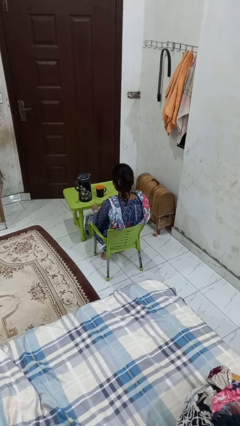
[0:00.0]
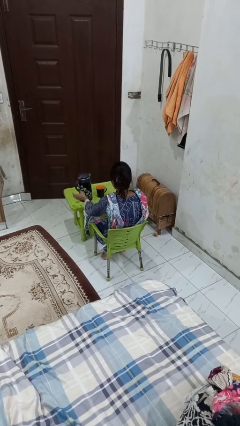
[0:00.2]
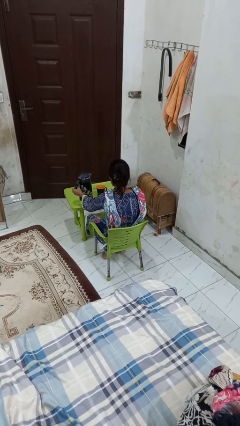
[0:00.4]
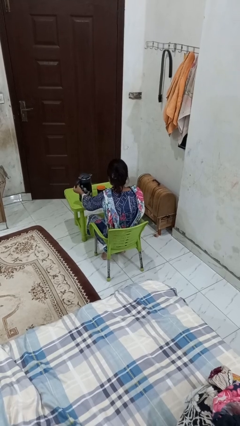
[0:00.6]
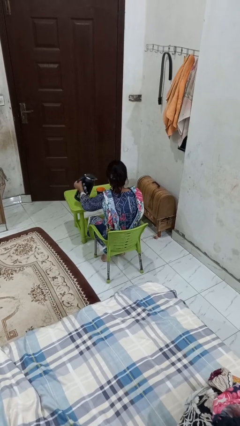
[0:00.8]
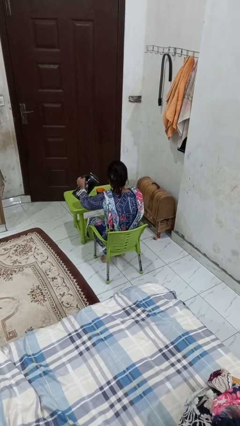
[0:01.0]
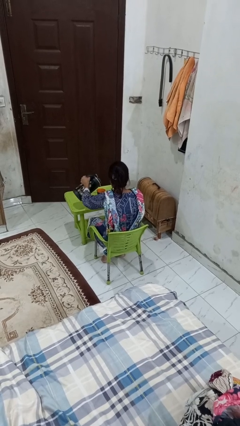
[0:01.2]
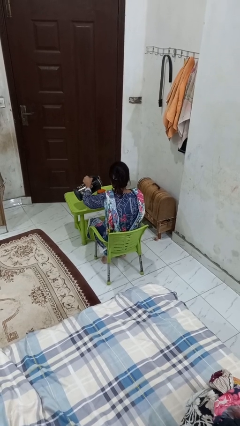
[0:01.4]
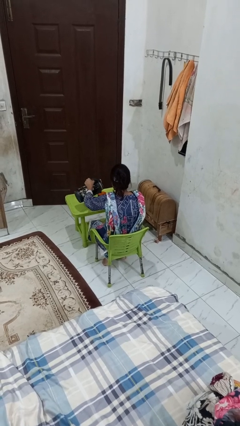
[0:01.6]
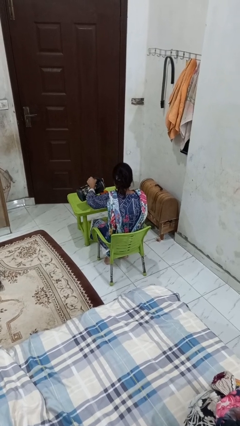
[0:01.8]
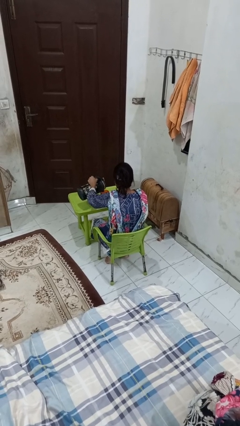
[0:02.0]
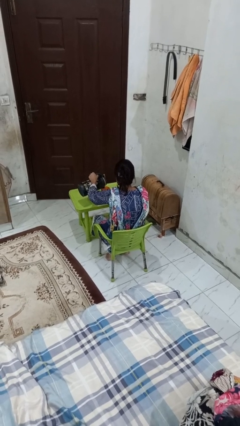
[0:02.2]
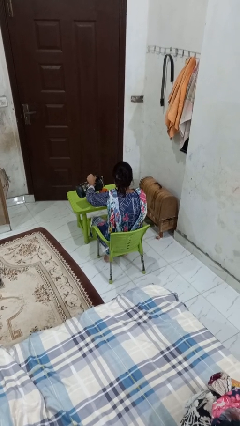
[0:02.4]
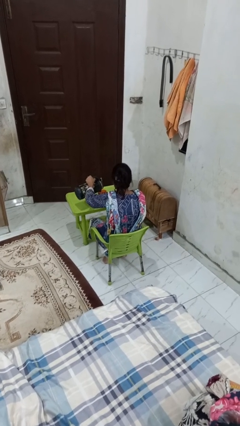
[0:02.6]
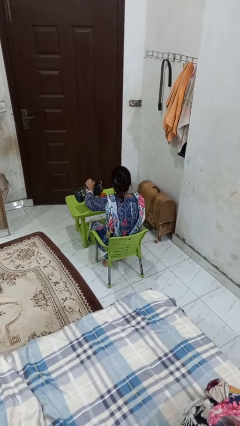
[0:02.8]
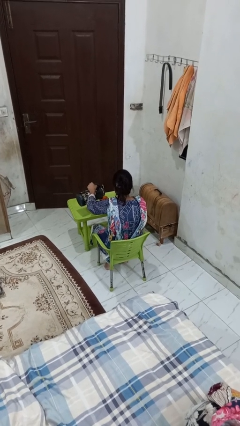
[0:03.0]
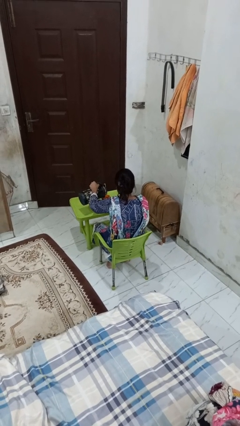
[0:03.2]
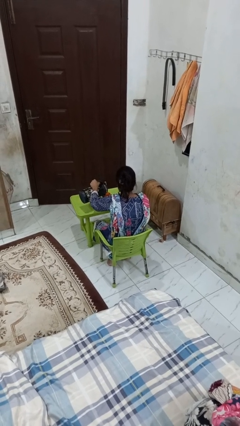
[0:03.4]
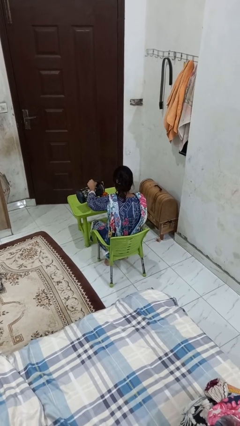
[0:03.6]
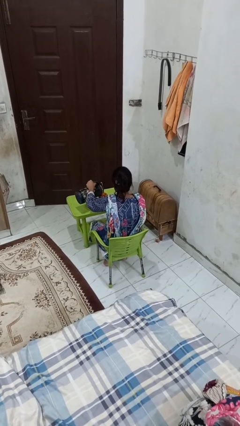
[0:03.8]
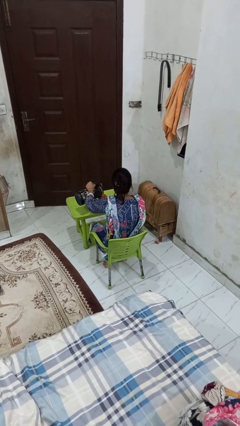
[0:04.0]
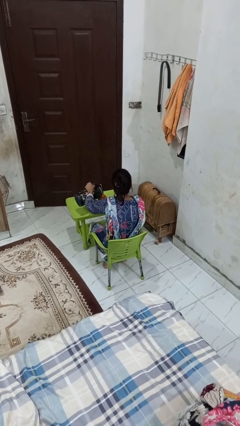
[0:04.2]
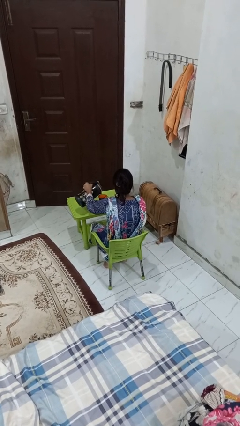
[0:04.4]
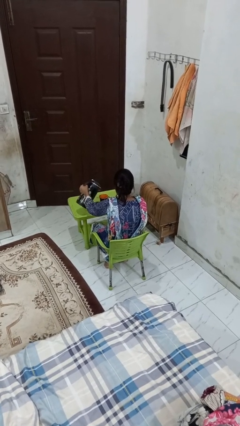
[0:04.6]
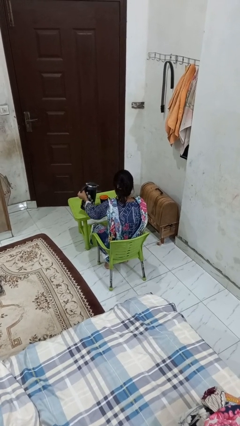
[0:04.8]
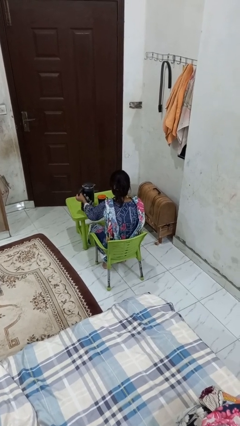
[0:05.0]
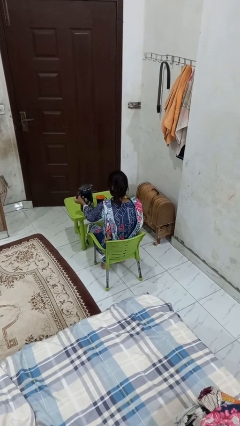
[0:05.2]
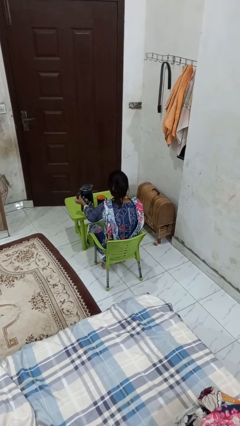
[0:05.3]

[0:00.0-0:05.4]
person pours coffee into mug

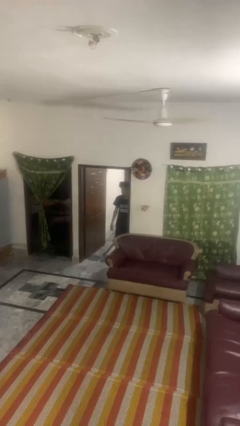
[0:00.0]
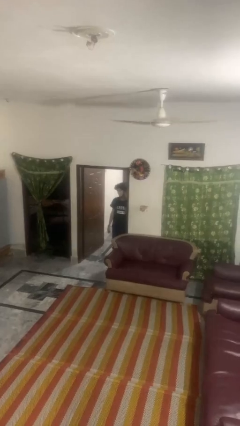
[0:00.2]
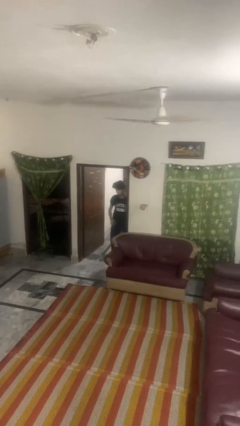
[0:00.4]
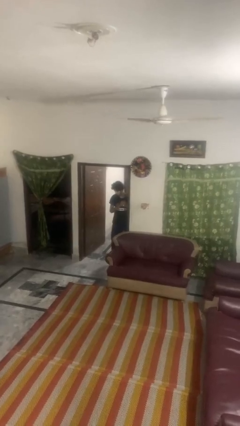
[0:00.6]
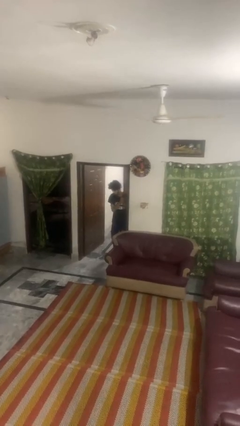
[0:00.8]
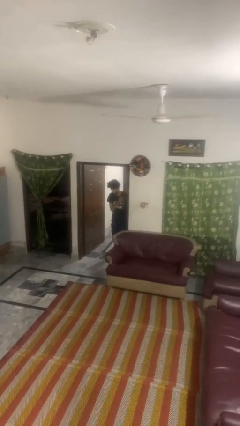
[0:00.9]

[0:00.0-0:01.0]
person bumps into wall

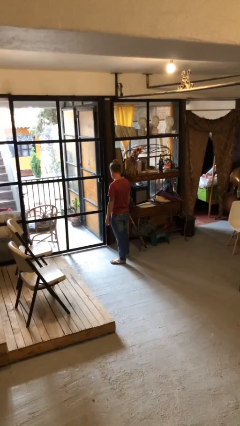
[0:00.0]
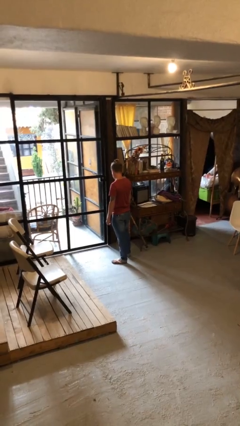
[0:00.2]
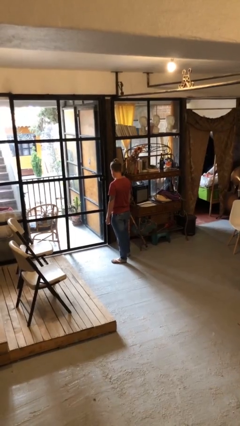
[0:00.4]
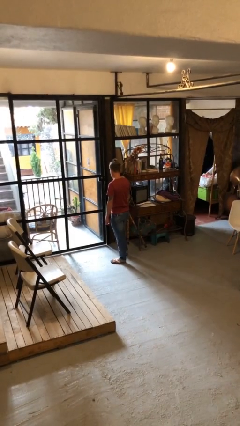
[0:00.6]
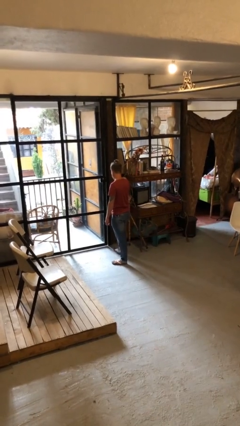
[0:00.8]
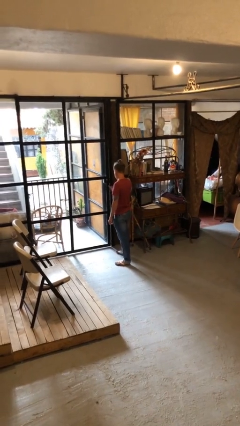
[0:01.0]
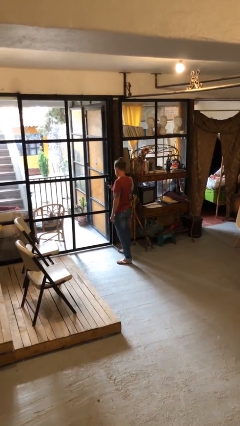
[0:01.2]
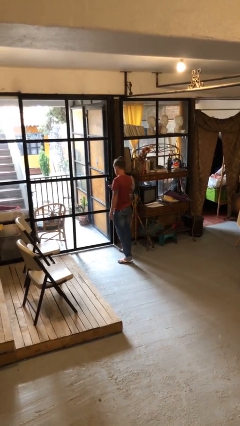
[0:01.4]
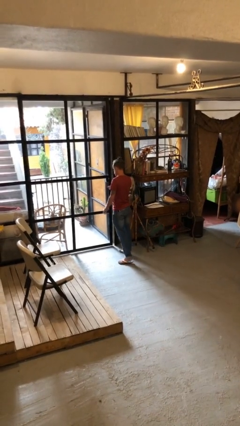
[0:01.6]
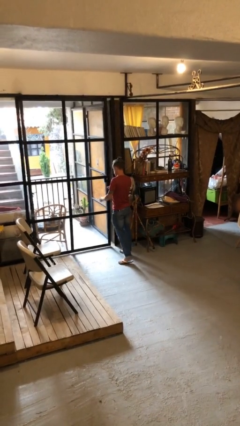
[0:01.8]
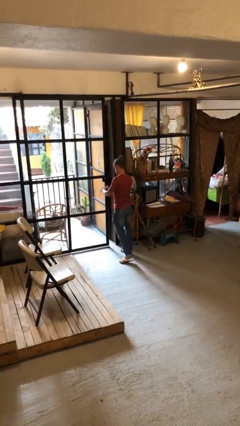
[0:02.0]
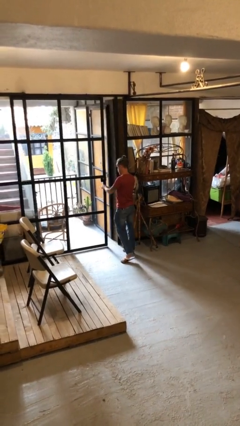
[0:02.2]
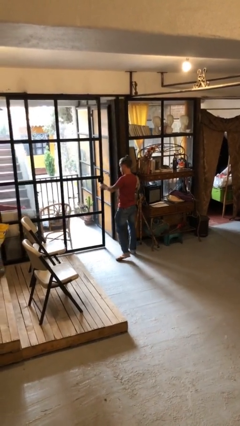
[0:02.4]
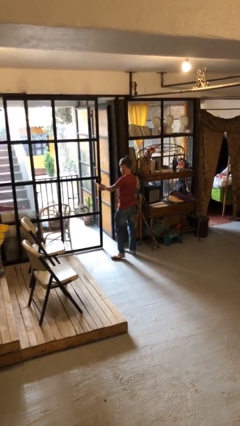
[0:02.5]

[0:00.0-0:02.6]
person opens facility door

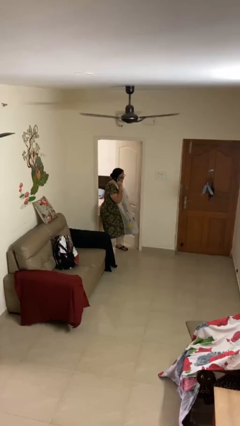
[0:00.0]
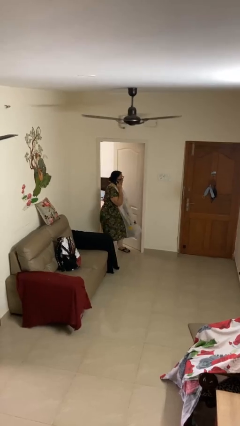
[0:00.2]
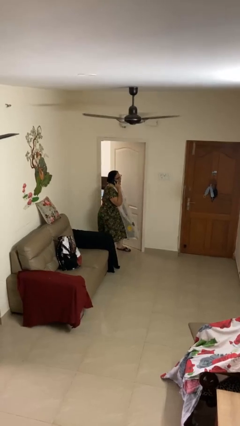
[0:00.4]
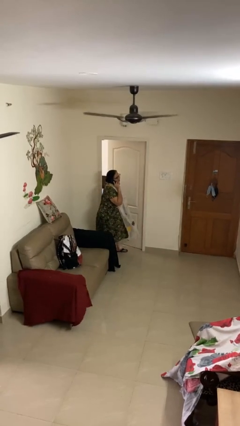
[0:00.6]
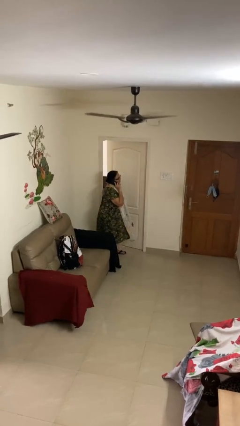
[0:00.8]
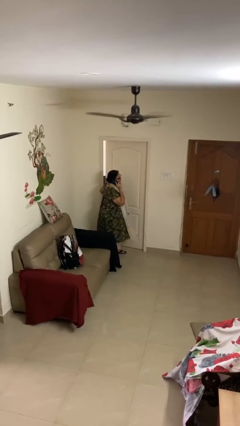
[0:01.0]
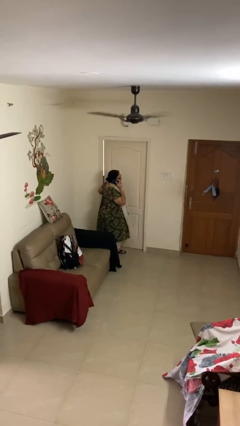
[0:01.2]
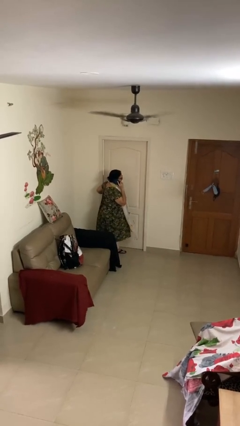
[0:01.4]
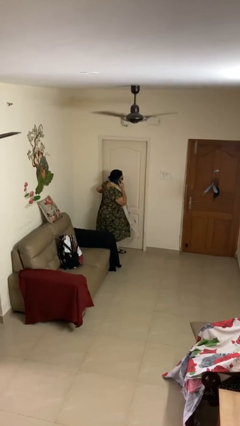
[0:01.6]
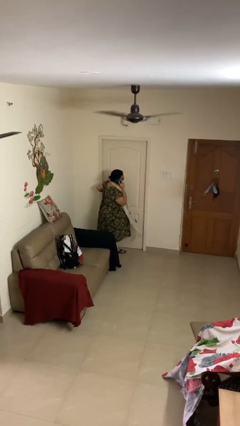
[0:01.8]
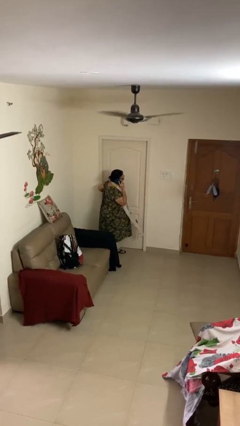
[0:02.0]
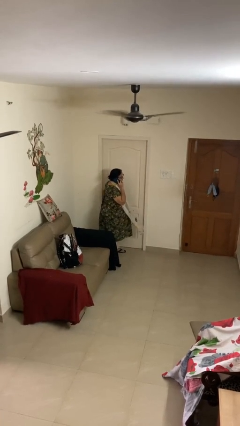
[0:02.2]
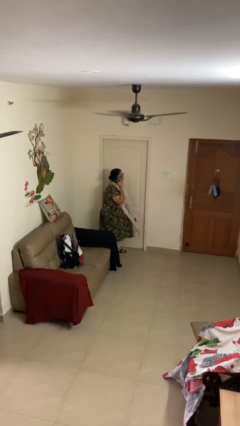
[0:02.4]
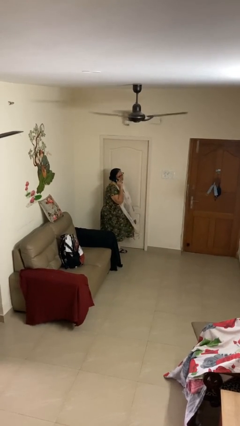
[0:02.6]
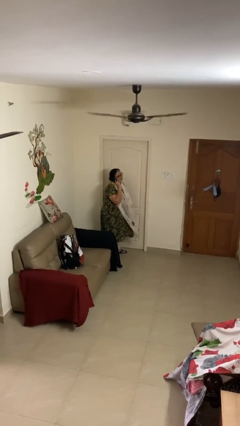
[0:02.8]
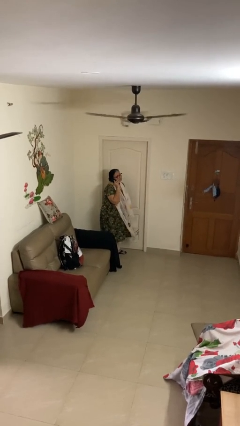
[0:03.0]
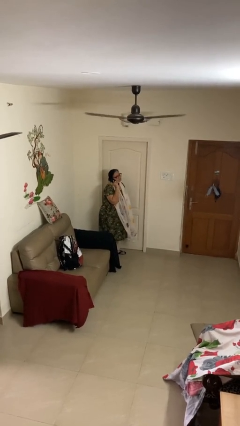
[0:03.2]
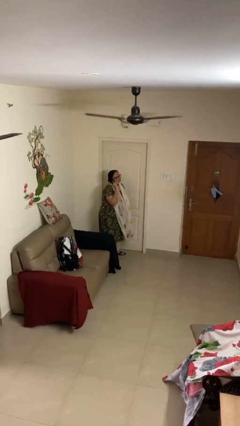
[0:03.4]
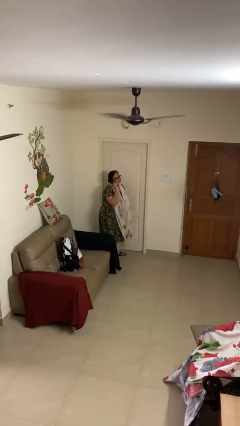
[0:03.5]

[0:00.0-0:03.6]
person closes facility door

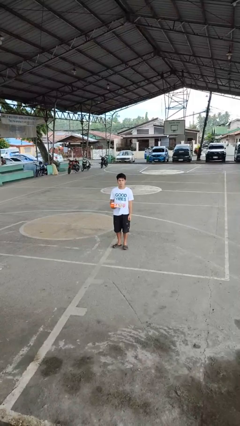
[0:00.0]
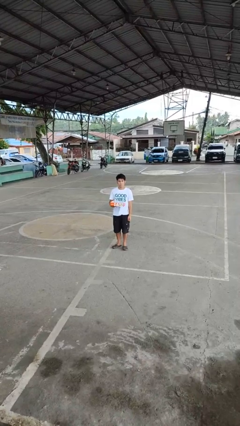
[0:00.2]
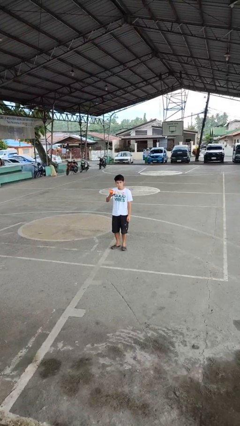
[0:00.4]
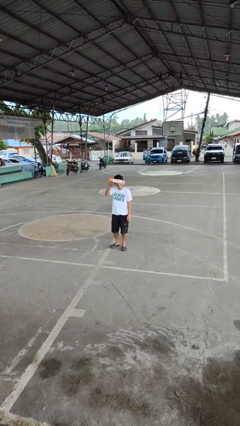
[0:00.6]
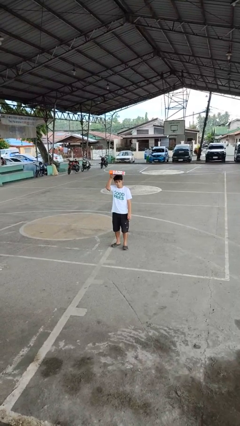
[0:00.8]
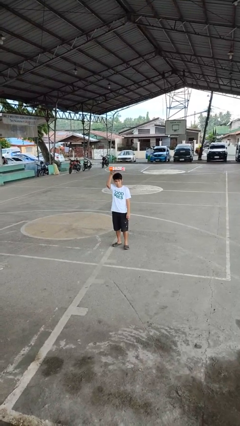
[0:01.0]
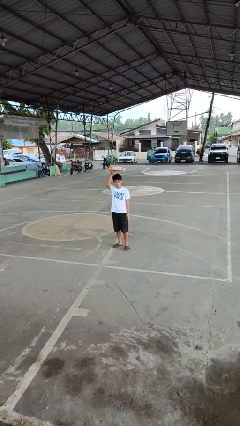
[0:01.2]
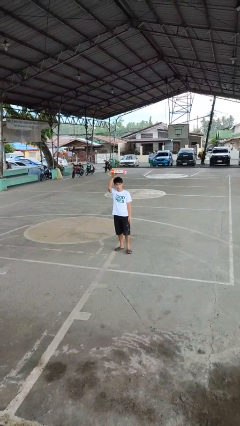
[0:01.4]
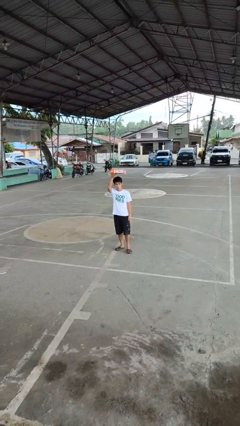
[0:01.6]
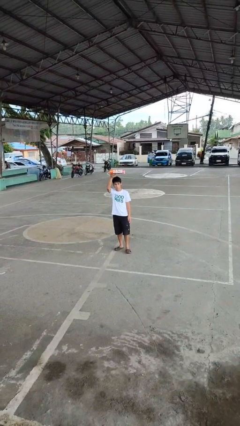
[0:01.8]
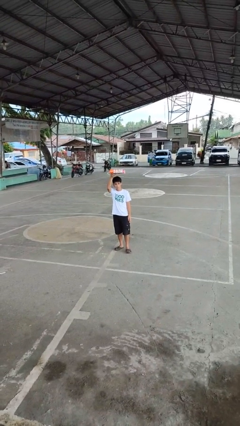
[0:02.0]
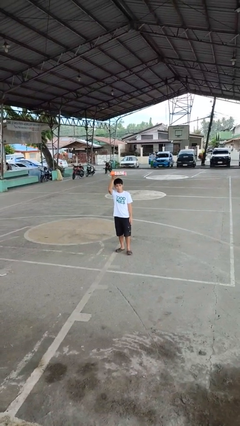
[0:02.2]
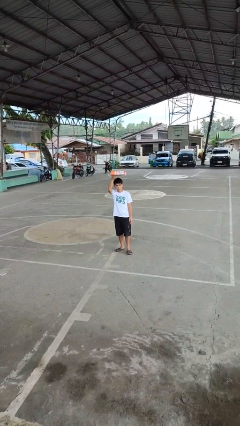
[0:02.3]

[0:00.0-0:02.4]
person holds object above head

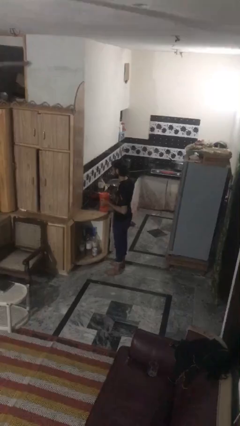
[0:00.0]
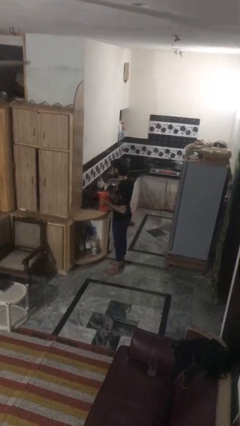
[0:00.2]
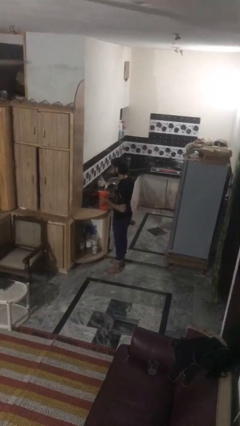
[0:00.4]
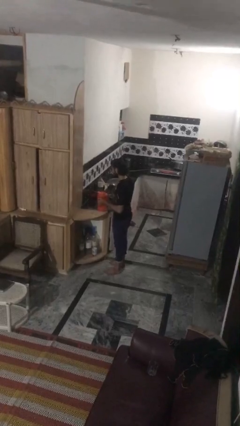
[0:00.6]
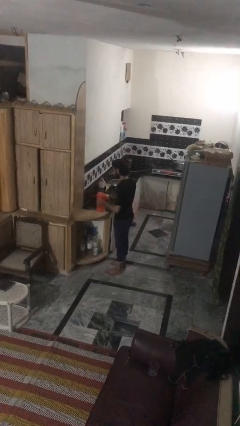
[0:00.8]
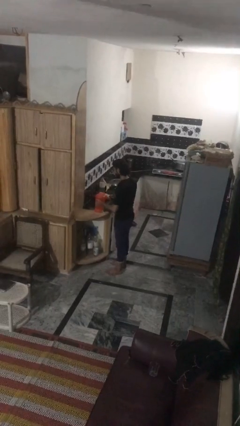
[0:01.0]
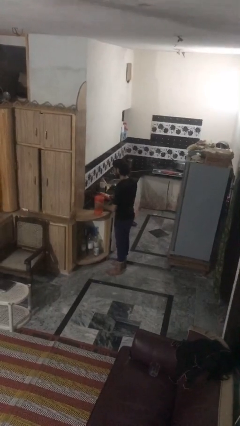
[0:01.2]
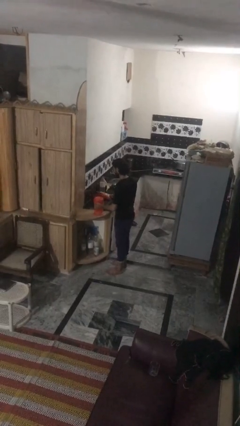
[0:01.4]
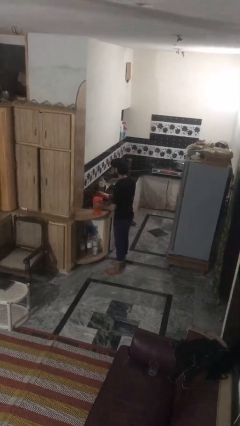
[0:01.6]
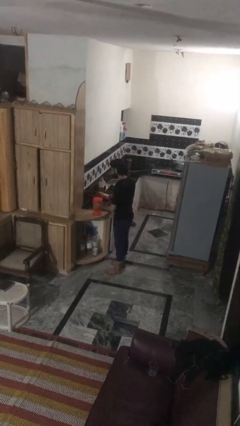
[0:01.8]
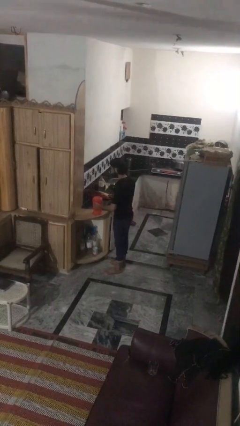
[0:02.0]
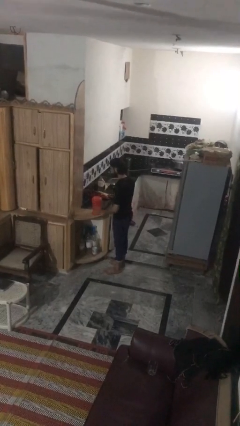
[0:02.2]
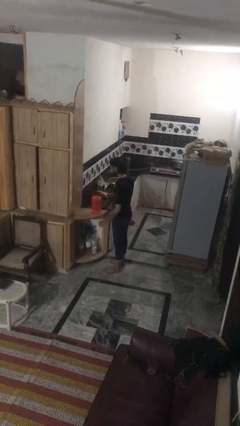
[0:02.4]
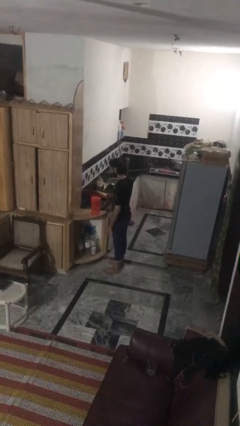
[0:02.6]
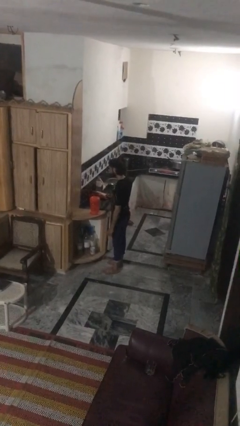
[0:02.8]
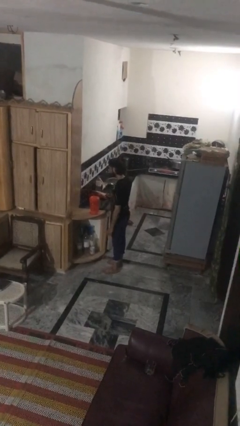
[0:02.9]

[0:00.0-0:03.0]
person puts down object on countertop
